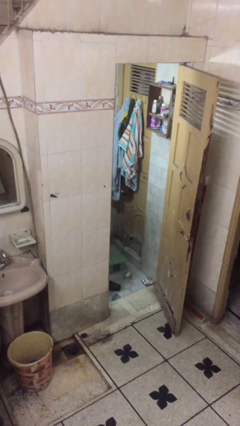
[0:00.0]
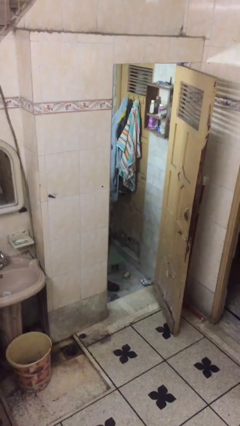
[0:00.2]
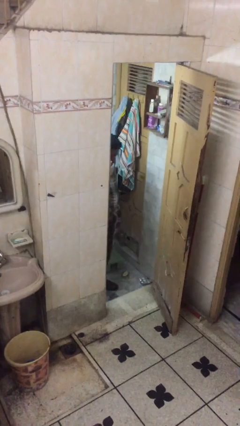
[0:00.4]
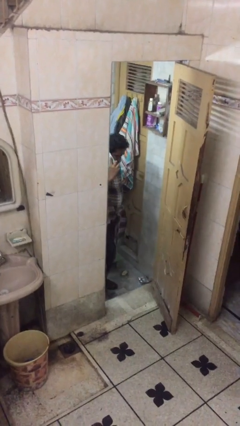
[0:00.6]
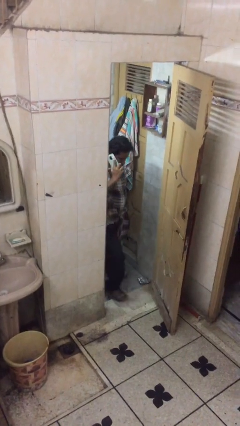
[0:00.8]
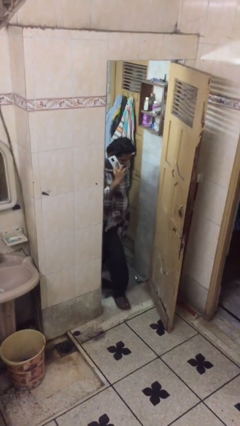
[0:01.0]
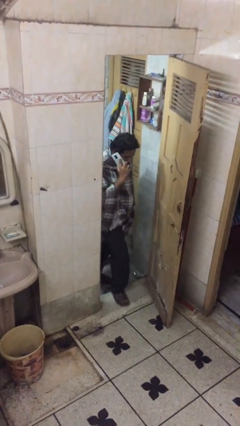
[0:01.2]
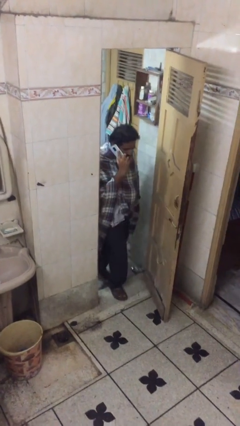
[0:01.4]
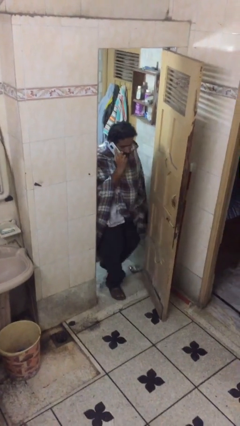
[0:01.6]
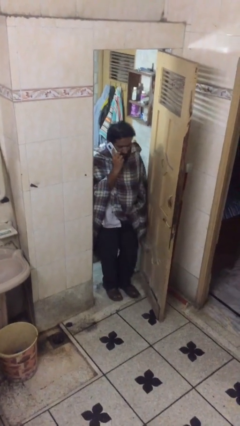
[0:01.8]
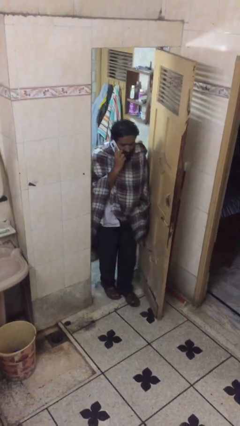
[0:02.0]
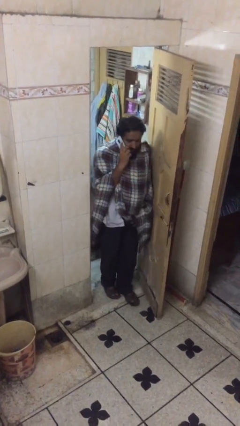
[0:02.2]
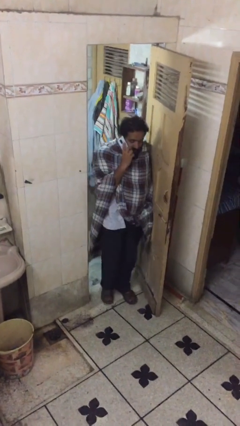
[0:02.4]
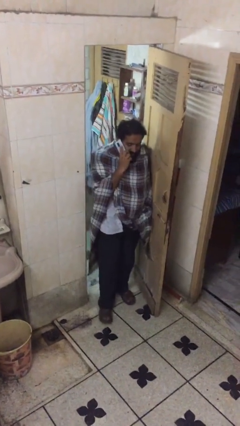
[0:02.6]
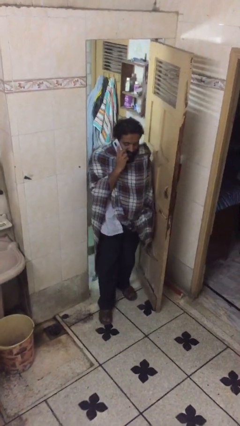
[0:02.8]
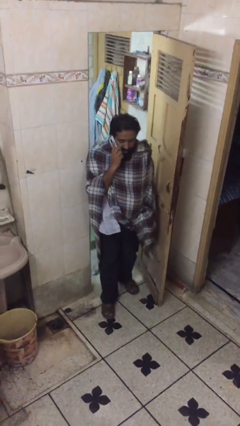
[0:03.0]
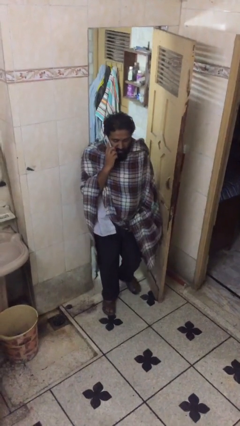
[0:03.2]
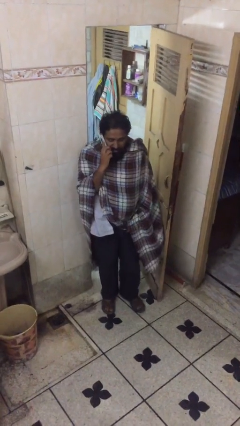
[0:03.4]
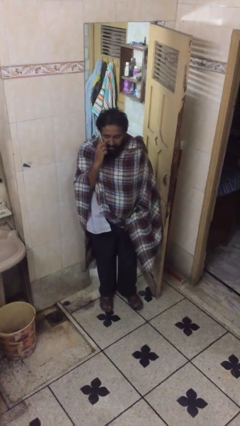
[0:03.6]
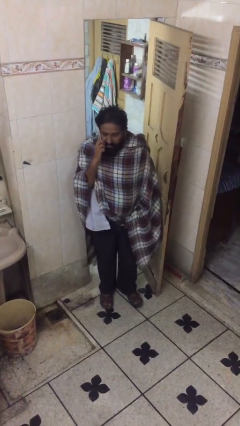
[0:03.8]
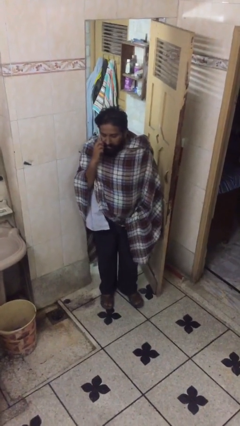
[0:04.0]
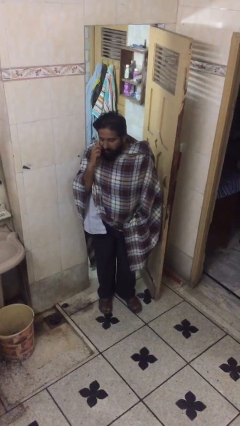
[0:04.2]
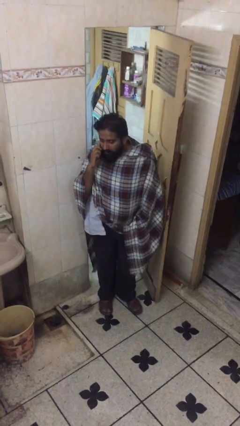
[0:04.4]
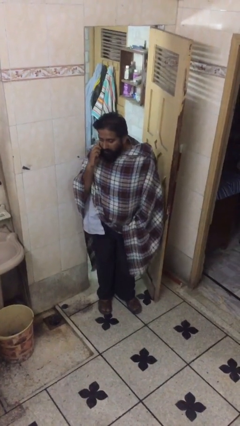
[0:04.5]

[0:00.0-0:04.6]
person enters scene through structure

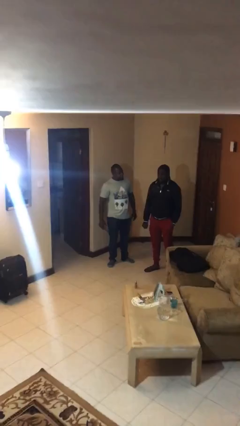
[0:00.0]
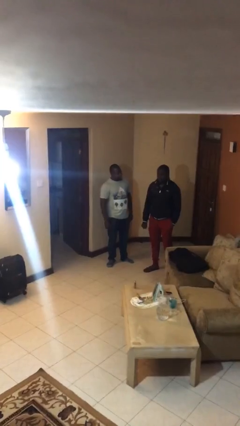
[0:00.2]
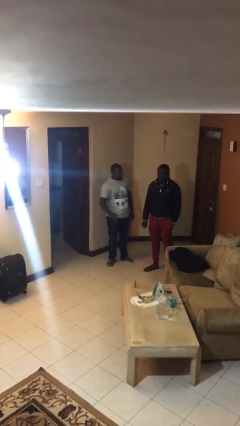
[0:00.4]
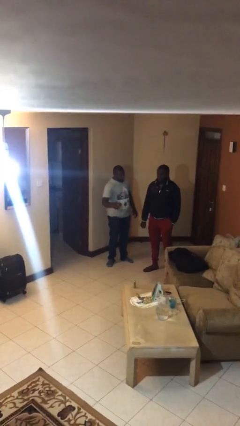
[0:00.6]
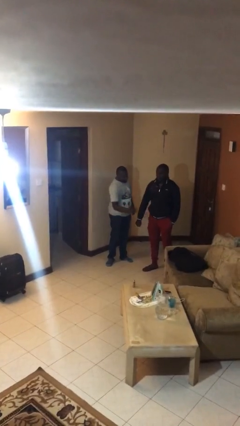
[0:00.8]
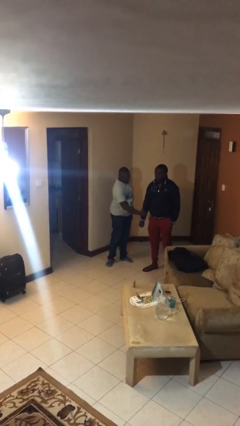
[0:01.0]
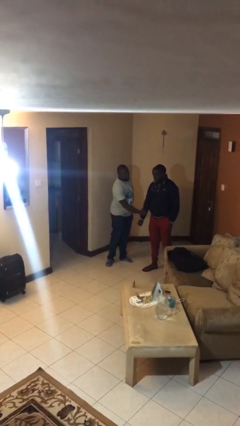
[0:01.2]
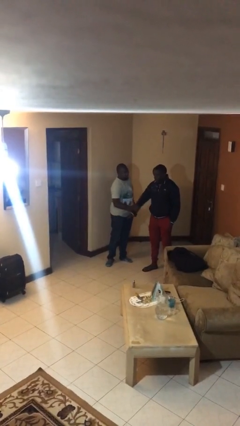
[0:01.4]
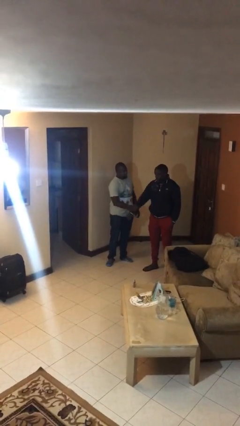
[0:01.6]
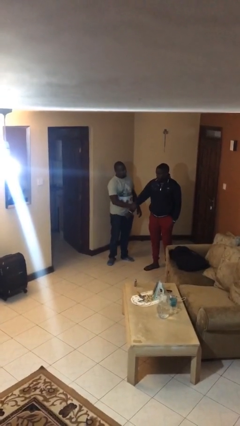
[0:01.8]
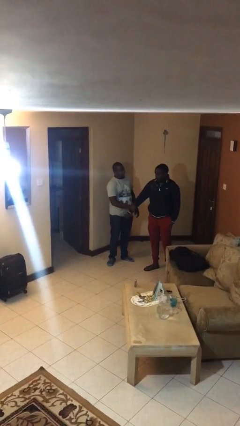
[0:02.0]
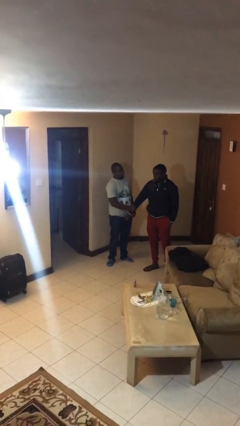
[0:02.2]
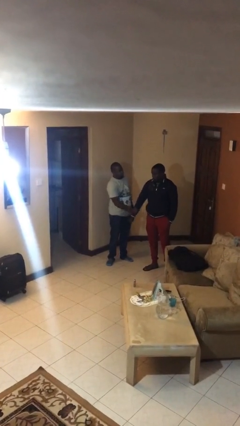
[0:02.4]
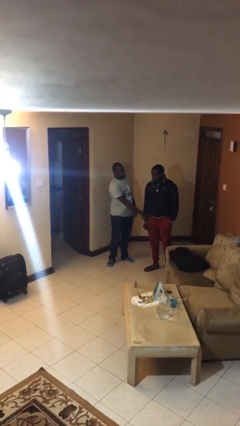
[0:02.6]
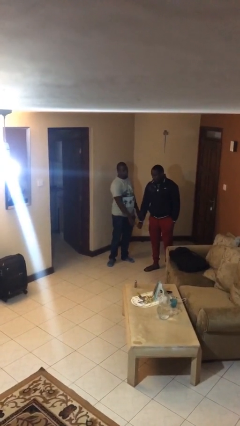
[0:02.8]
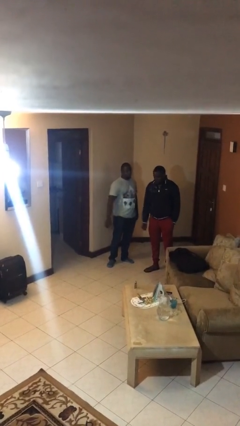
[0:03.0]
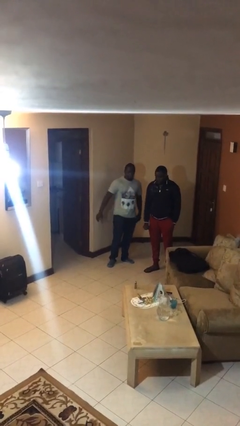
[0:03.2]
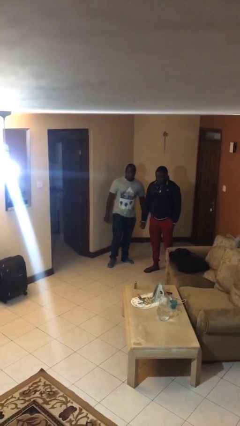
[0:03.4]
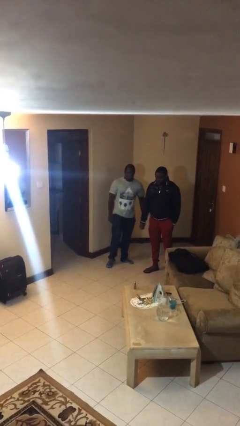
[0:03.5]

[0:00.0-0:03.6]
person grabs person by forearm

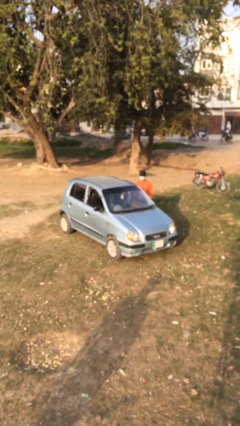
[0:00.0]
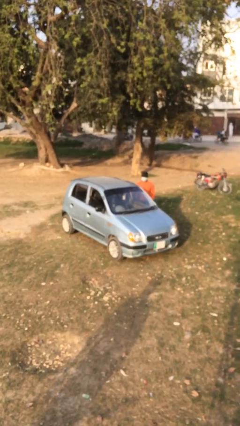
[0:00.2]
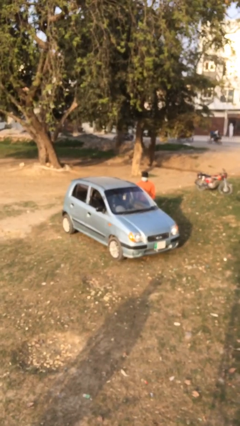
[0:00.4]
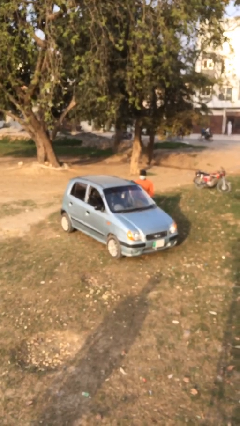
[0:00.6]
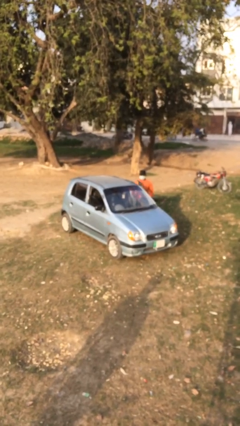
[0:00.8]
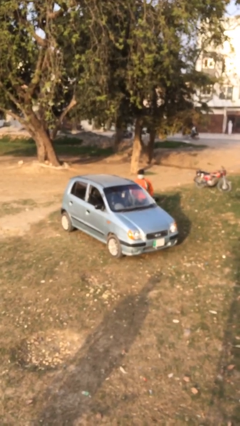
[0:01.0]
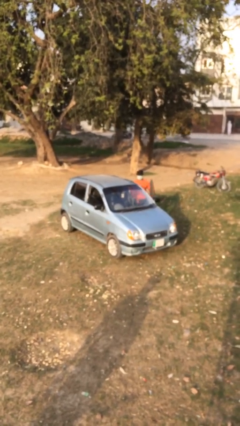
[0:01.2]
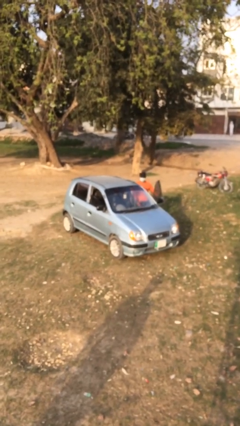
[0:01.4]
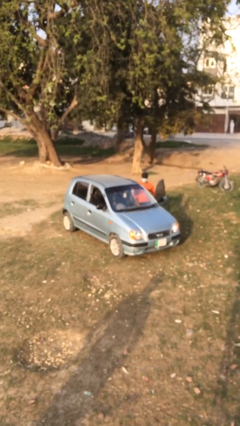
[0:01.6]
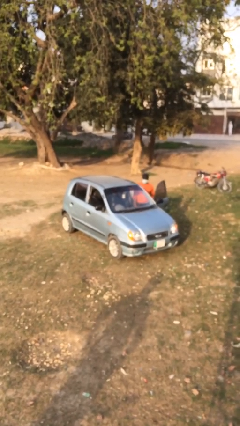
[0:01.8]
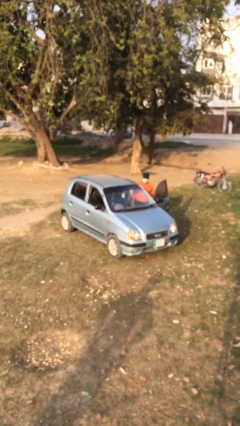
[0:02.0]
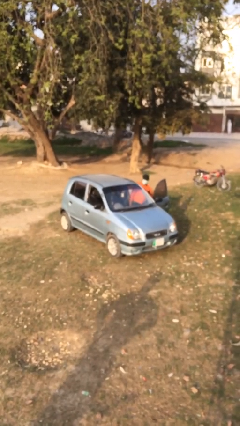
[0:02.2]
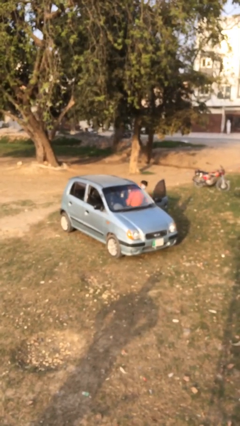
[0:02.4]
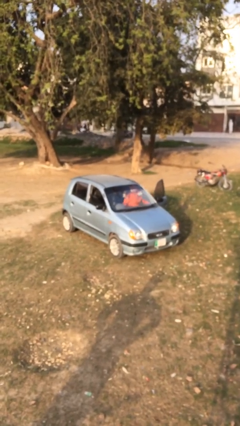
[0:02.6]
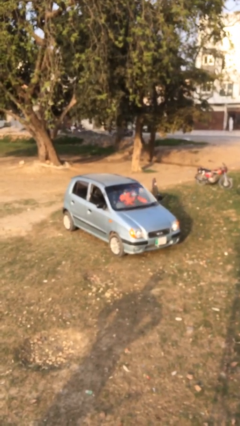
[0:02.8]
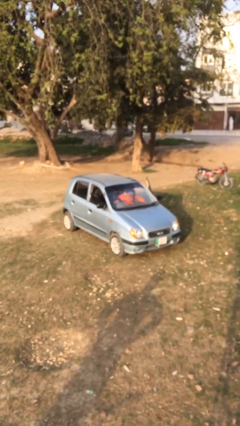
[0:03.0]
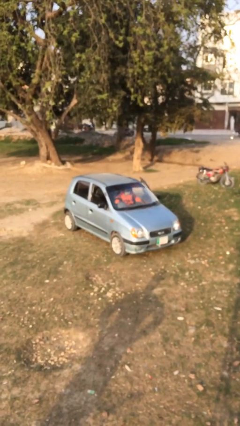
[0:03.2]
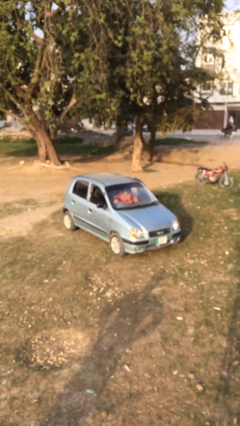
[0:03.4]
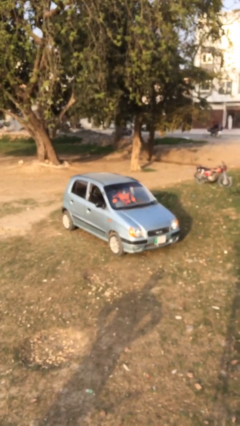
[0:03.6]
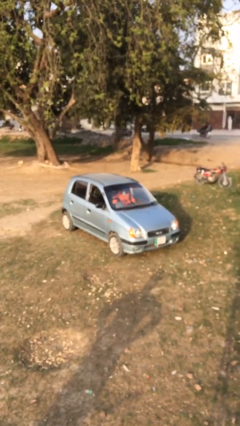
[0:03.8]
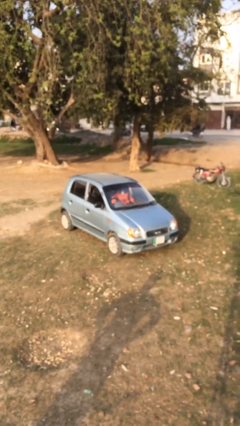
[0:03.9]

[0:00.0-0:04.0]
car picks up person

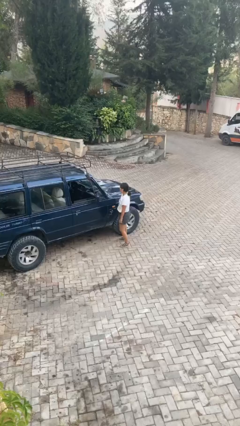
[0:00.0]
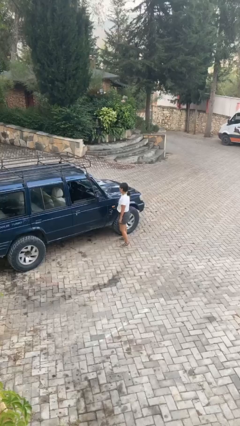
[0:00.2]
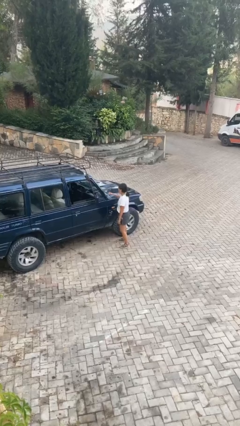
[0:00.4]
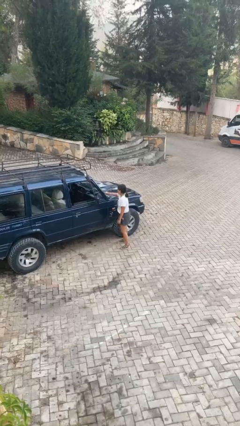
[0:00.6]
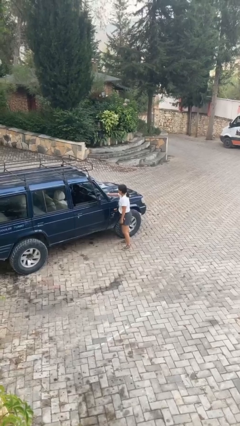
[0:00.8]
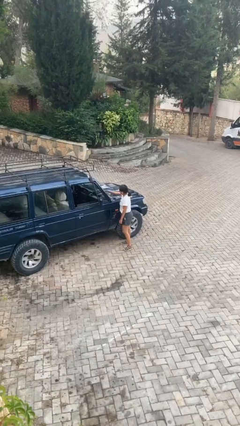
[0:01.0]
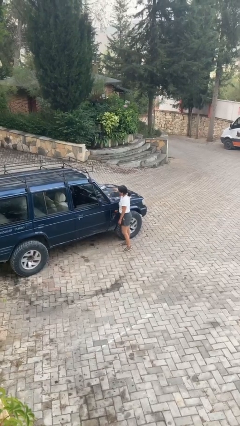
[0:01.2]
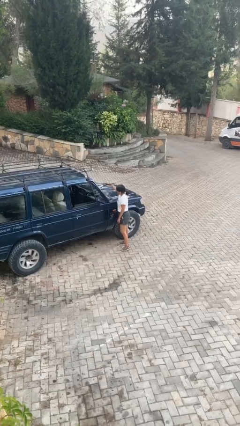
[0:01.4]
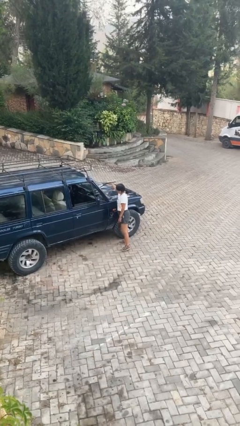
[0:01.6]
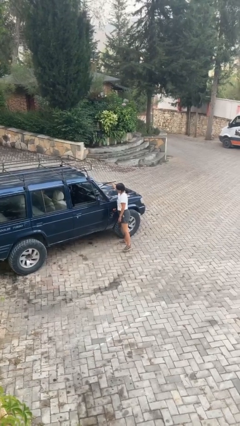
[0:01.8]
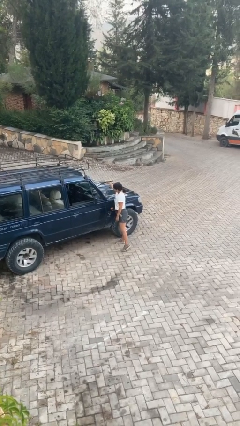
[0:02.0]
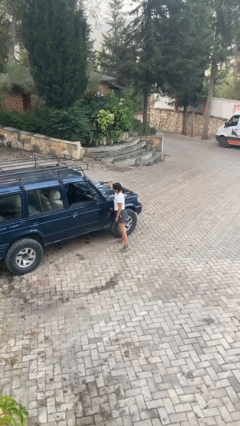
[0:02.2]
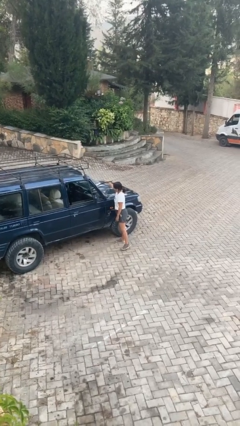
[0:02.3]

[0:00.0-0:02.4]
person flips up car wipers

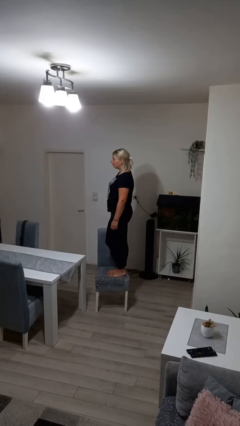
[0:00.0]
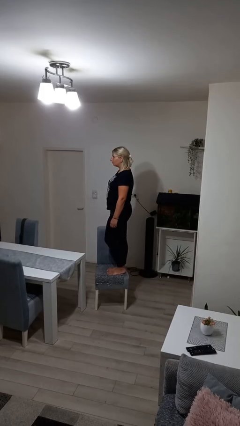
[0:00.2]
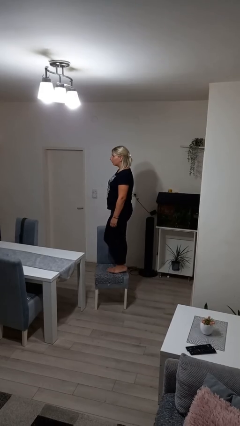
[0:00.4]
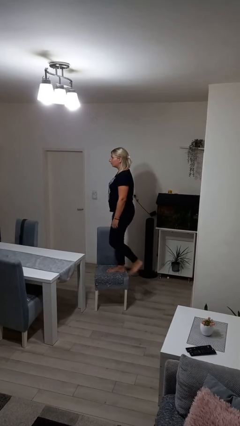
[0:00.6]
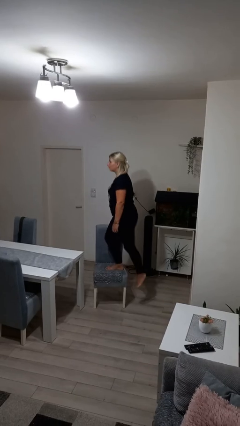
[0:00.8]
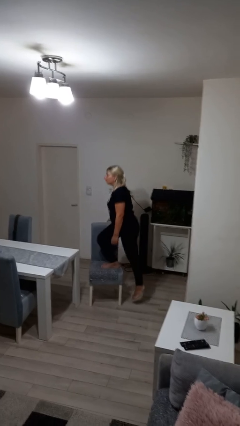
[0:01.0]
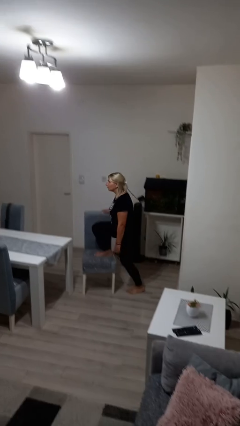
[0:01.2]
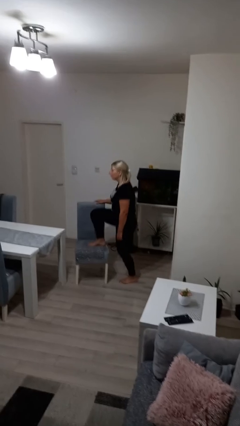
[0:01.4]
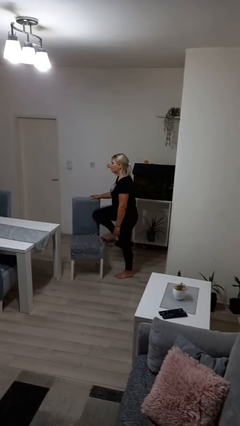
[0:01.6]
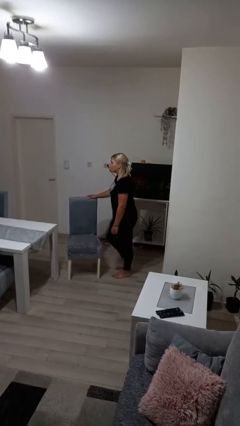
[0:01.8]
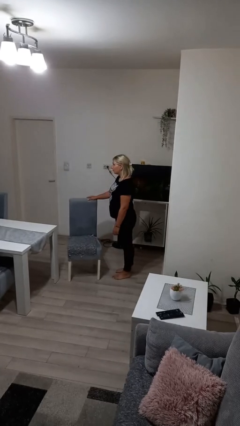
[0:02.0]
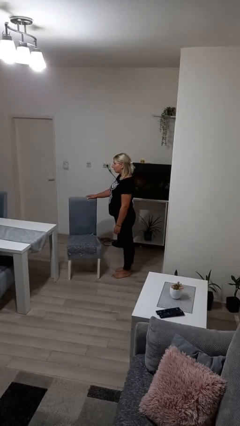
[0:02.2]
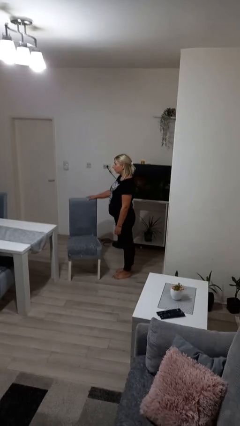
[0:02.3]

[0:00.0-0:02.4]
person climbs off chair

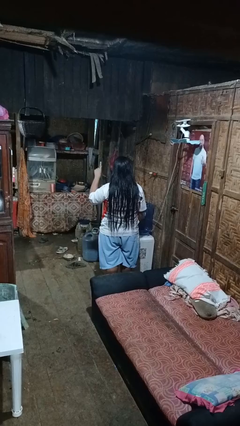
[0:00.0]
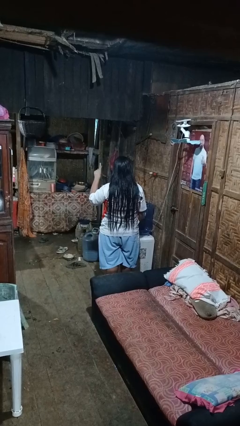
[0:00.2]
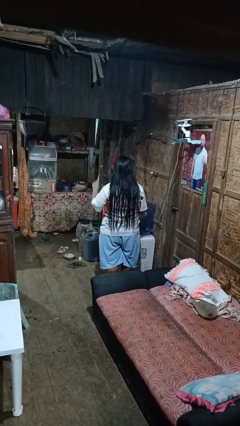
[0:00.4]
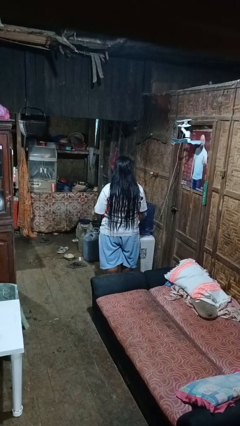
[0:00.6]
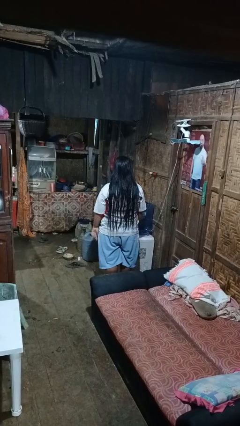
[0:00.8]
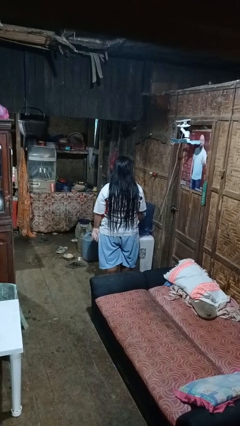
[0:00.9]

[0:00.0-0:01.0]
person gestures number one
